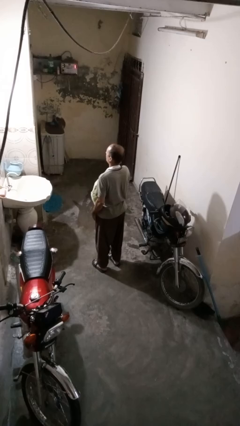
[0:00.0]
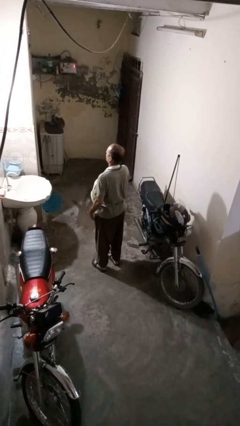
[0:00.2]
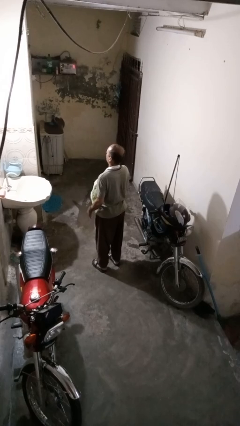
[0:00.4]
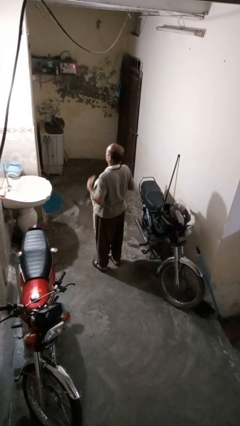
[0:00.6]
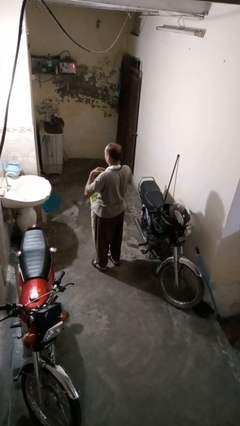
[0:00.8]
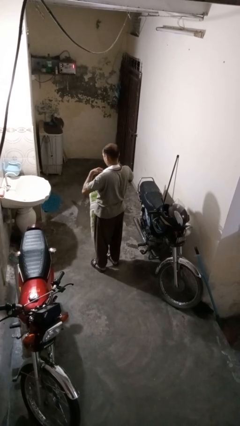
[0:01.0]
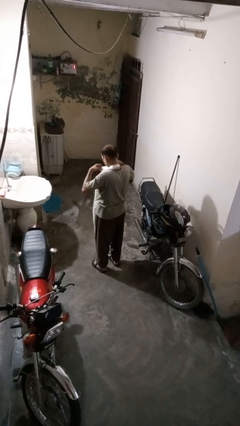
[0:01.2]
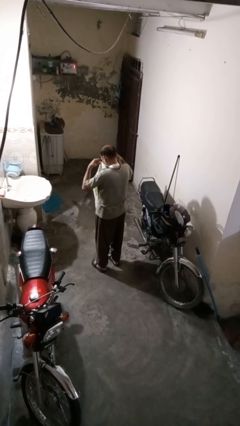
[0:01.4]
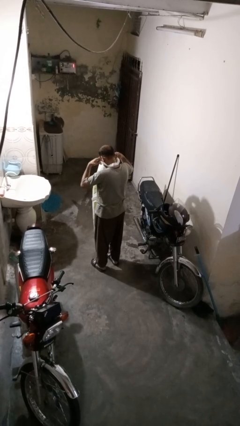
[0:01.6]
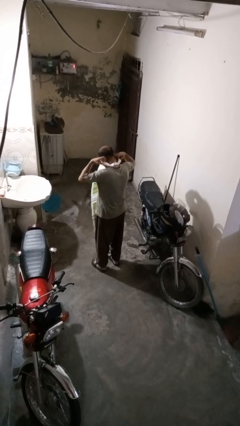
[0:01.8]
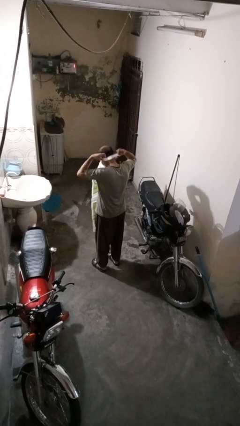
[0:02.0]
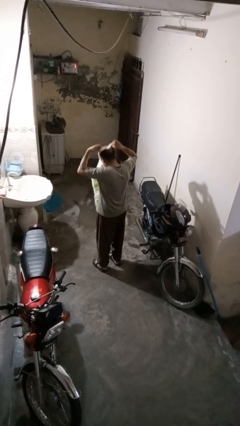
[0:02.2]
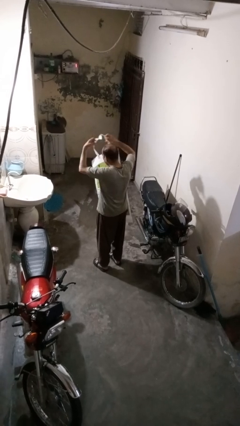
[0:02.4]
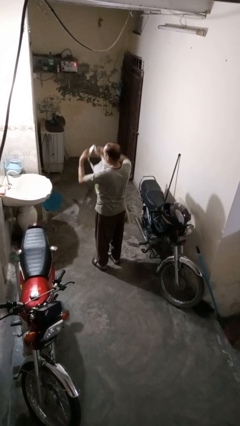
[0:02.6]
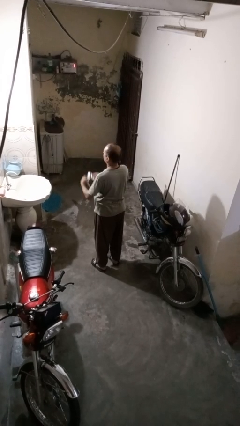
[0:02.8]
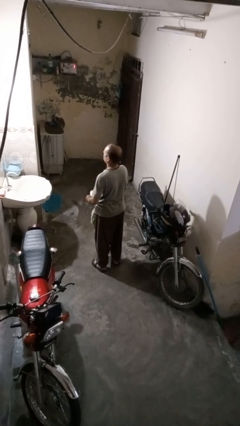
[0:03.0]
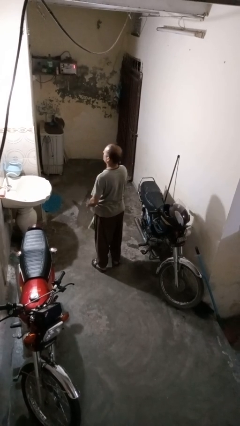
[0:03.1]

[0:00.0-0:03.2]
person takes off apron

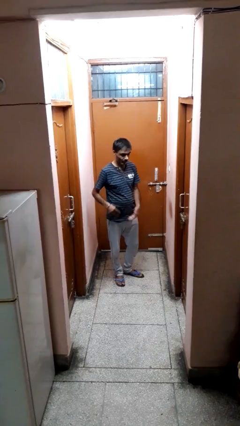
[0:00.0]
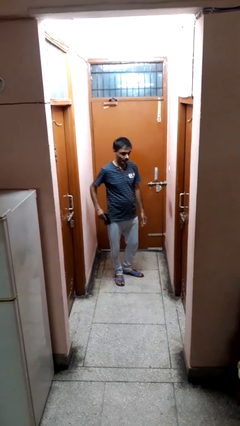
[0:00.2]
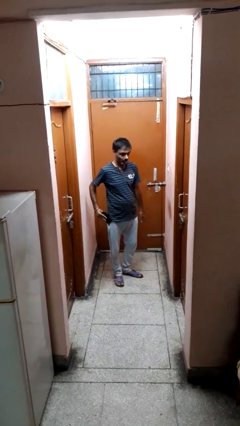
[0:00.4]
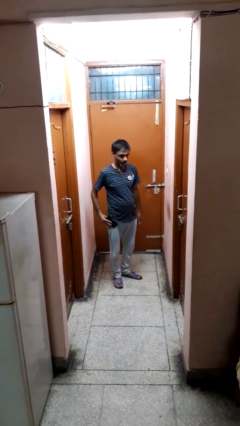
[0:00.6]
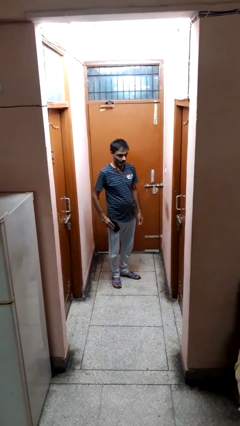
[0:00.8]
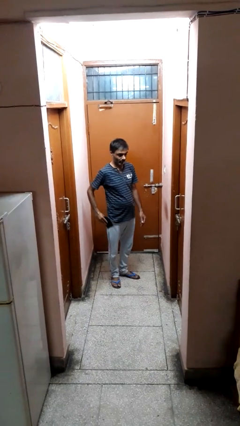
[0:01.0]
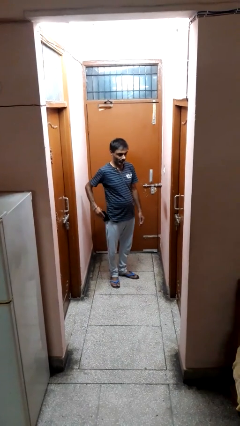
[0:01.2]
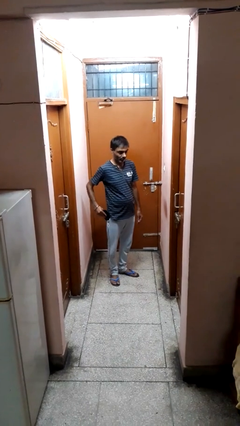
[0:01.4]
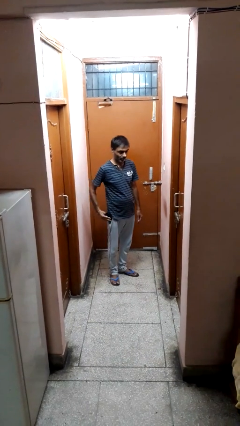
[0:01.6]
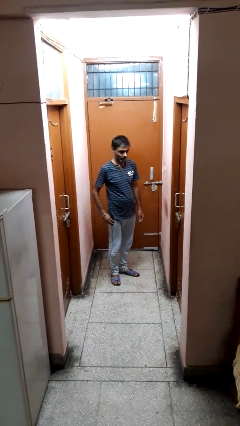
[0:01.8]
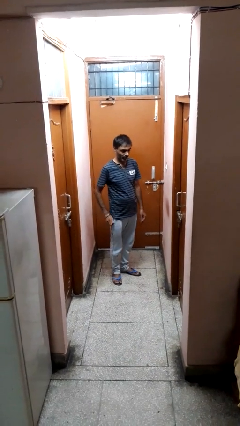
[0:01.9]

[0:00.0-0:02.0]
person puts phone into pocket

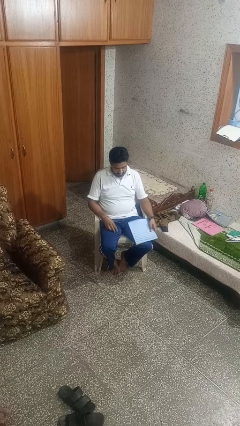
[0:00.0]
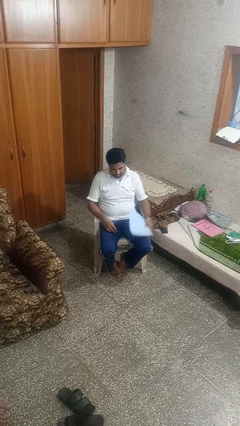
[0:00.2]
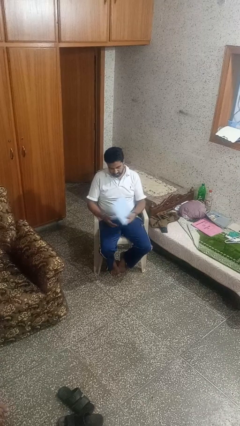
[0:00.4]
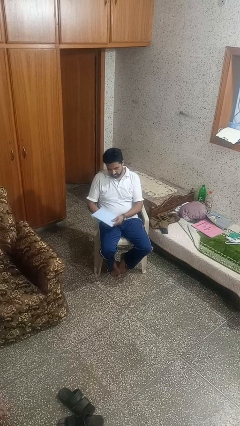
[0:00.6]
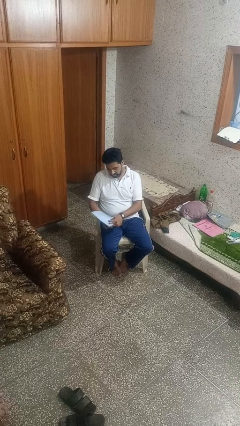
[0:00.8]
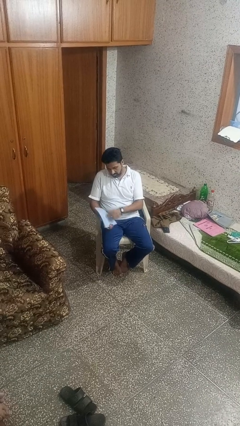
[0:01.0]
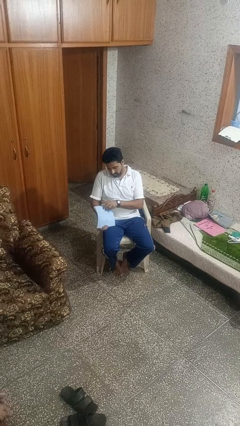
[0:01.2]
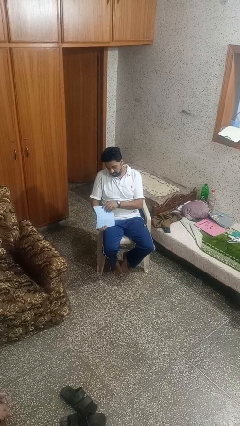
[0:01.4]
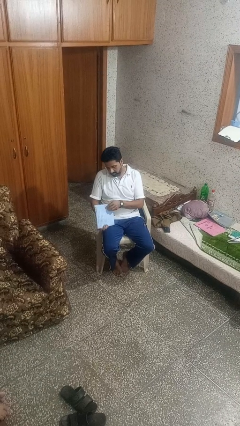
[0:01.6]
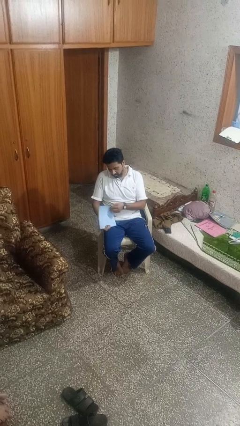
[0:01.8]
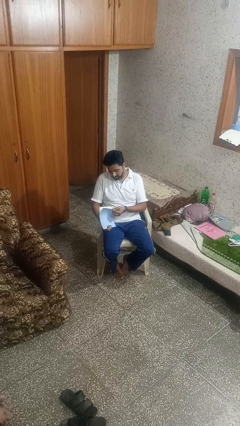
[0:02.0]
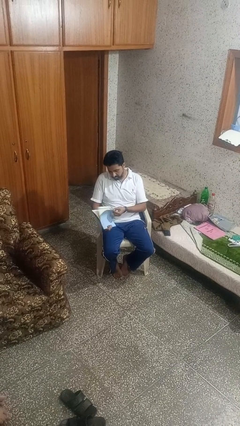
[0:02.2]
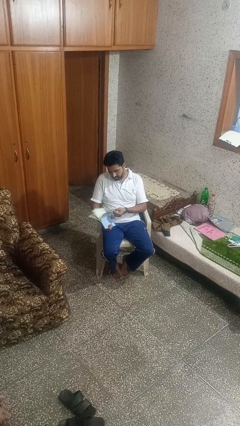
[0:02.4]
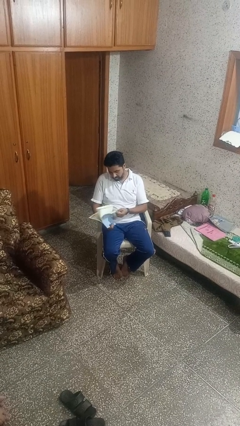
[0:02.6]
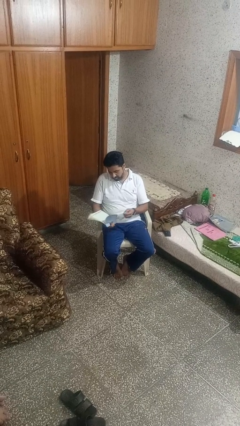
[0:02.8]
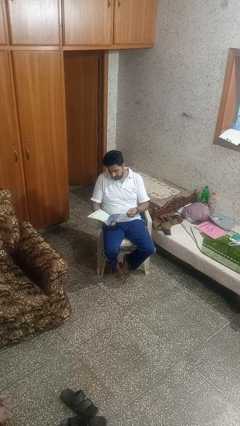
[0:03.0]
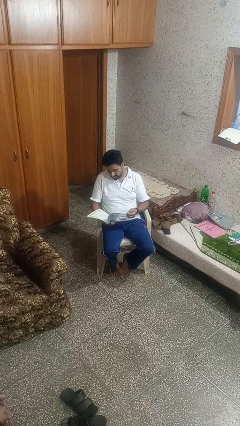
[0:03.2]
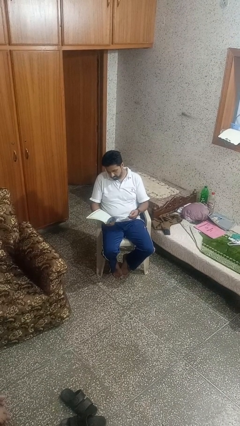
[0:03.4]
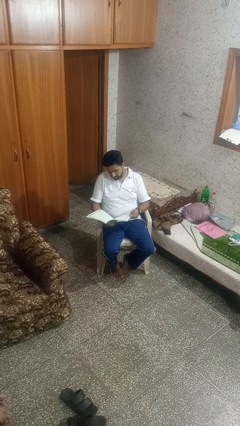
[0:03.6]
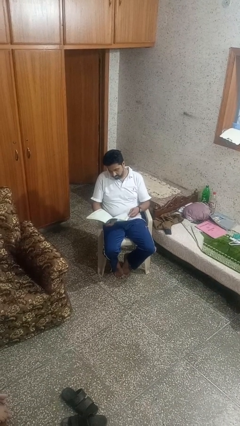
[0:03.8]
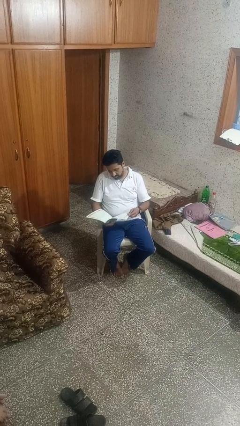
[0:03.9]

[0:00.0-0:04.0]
person reads magazine

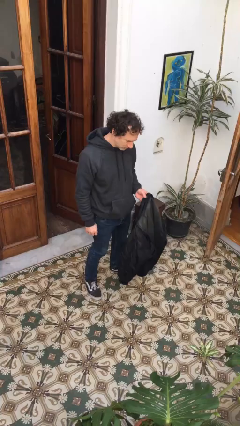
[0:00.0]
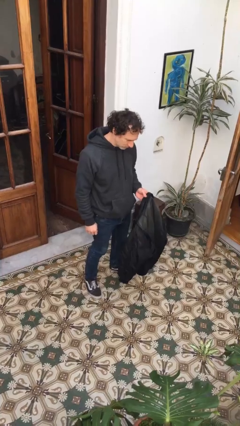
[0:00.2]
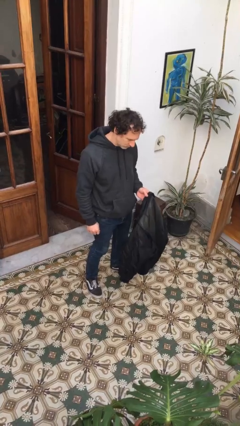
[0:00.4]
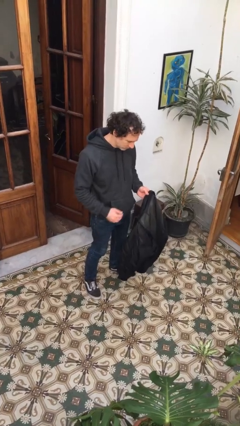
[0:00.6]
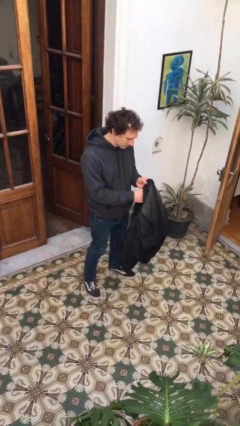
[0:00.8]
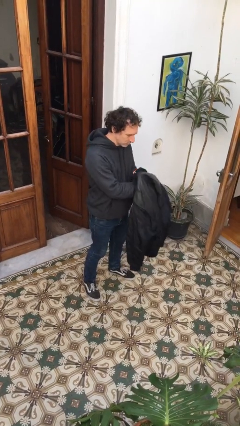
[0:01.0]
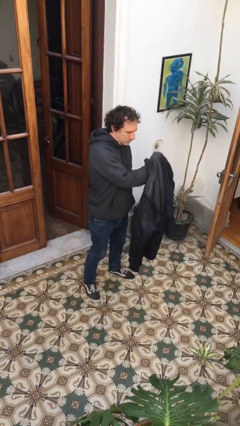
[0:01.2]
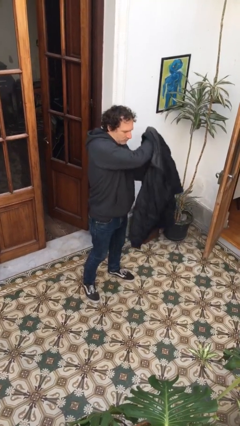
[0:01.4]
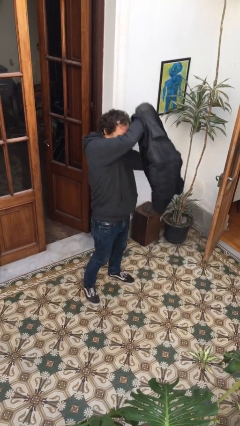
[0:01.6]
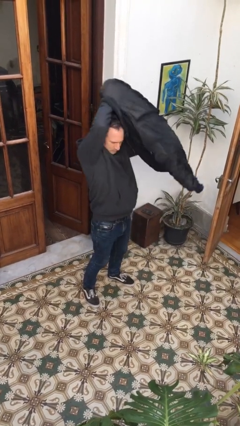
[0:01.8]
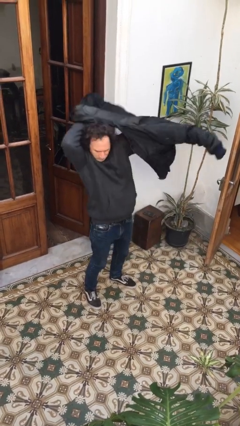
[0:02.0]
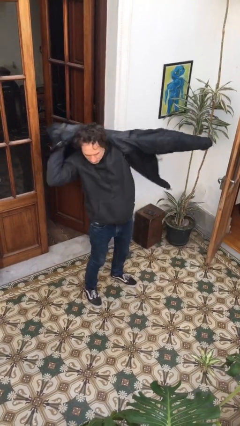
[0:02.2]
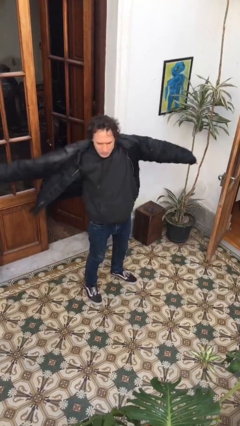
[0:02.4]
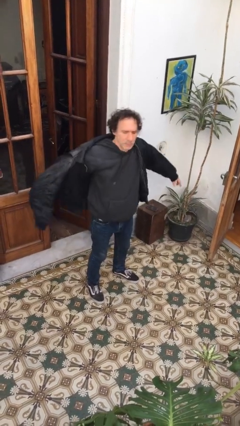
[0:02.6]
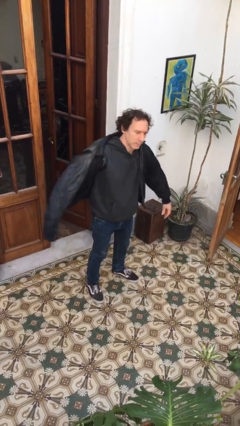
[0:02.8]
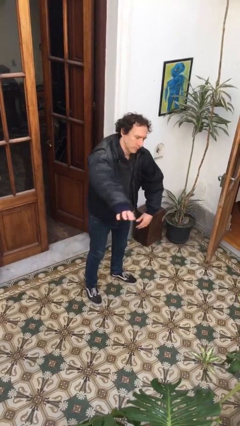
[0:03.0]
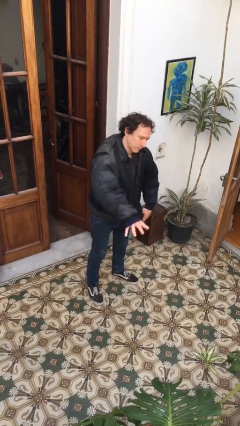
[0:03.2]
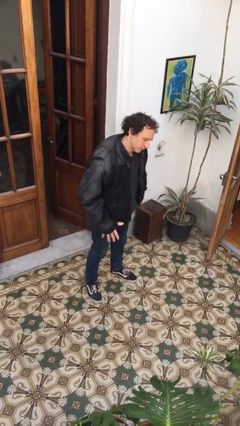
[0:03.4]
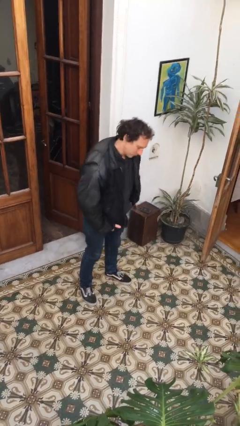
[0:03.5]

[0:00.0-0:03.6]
person puts on jacket

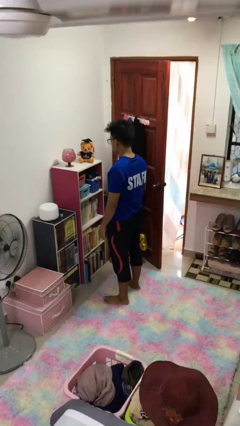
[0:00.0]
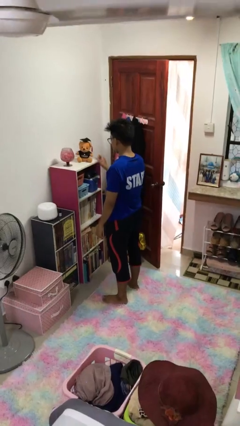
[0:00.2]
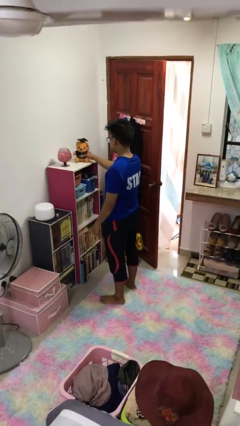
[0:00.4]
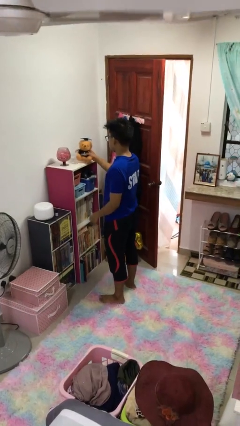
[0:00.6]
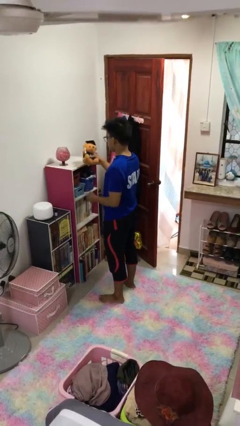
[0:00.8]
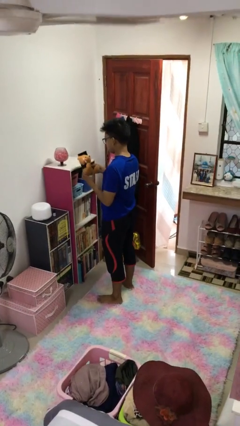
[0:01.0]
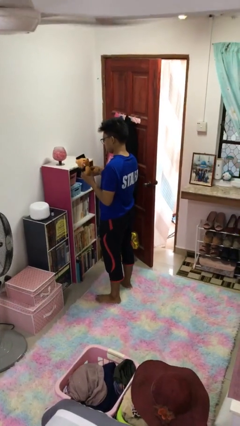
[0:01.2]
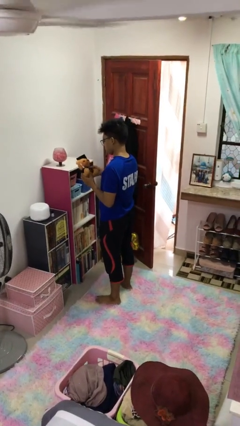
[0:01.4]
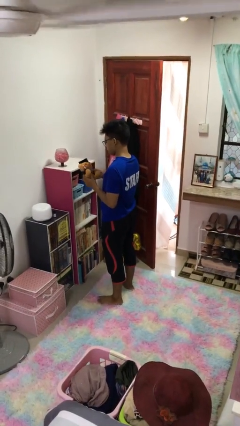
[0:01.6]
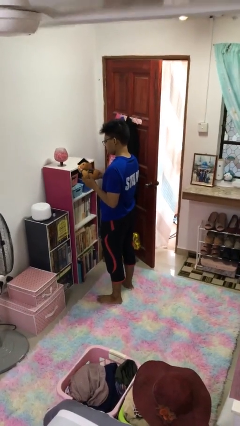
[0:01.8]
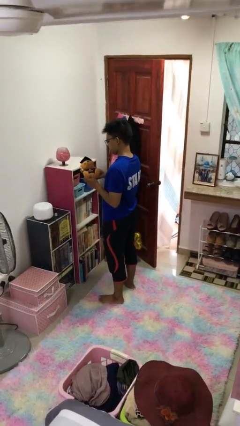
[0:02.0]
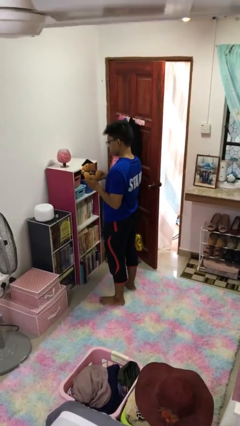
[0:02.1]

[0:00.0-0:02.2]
person picks up object from shelf

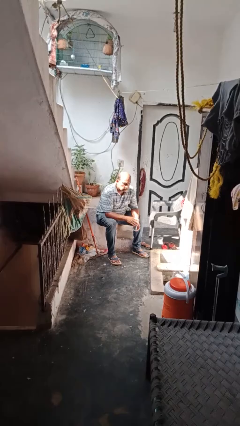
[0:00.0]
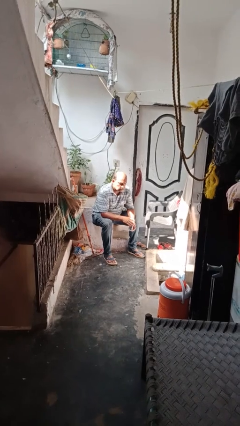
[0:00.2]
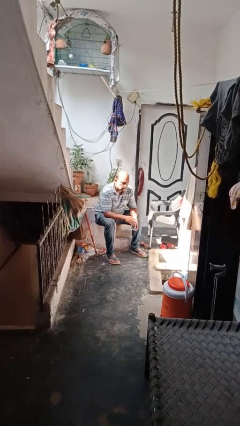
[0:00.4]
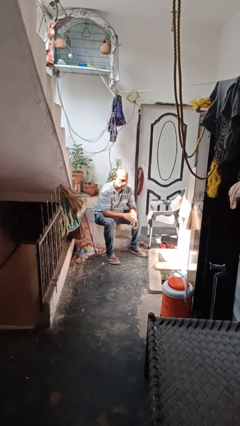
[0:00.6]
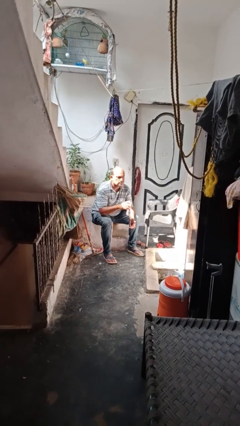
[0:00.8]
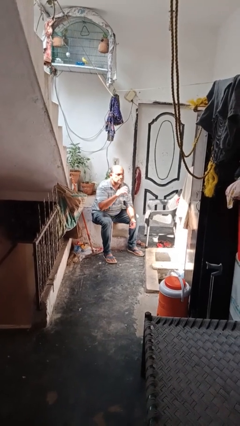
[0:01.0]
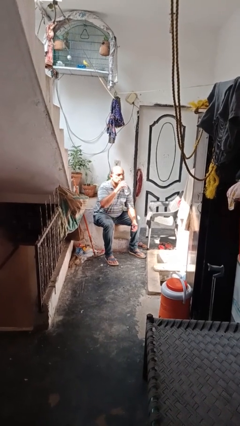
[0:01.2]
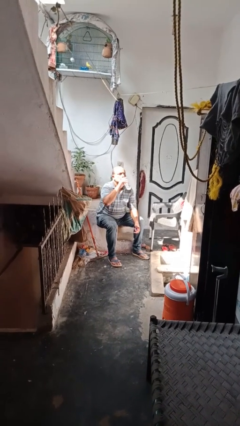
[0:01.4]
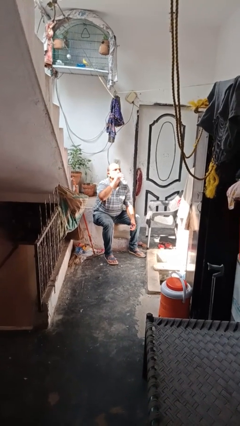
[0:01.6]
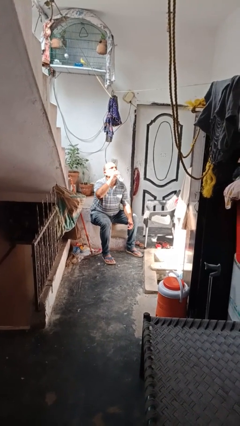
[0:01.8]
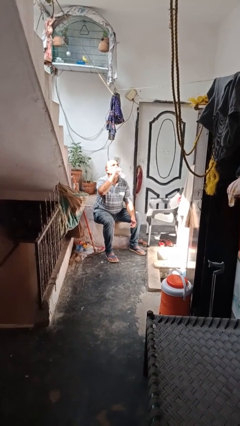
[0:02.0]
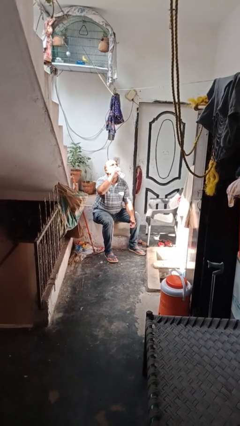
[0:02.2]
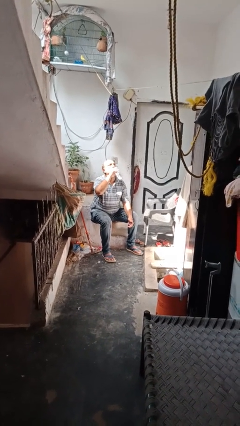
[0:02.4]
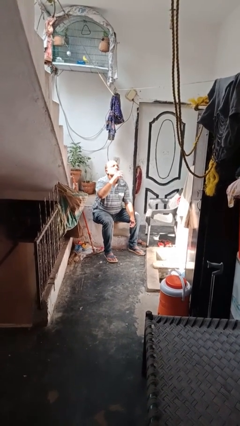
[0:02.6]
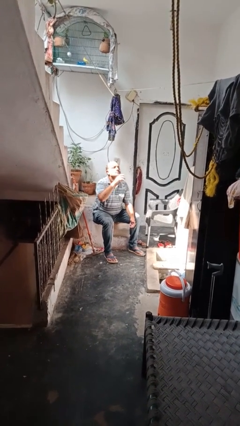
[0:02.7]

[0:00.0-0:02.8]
person drinks from bottle
